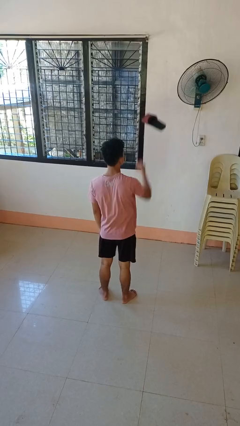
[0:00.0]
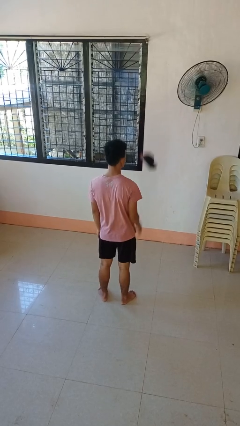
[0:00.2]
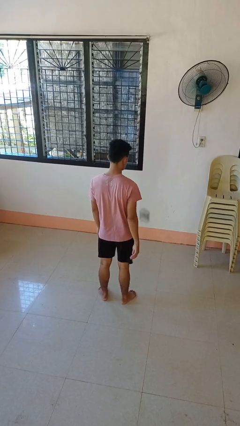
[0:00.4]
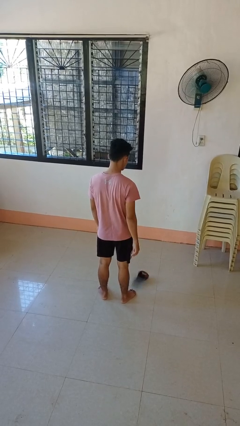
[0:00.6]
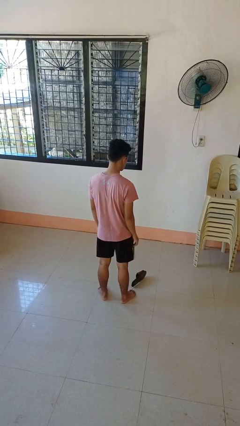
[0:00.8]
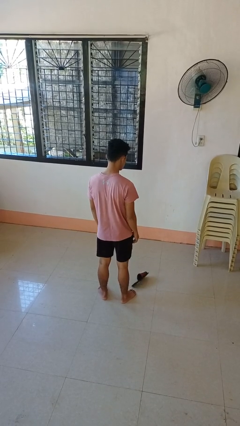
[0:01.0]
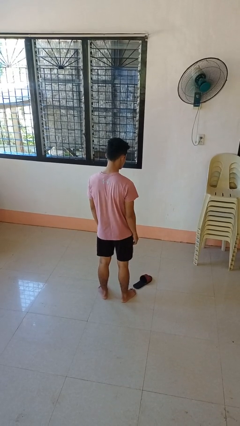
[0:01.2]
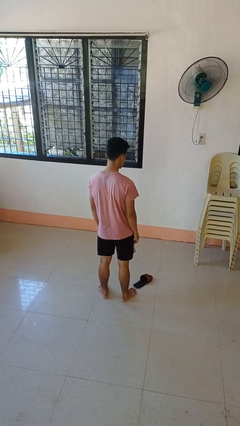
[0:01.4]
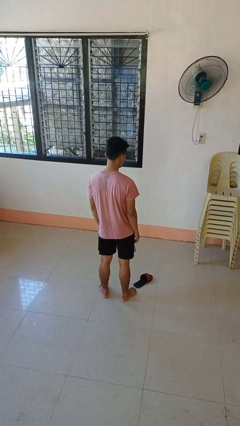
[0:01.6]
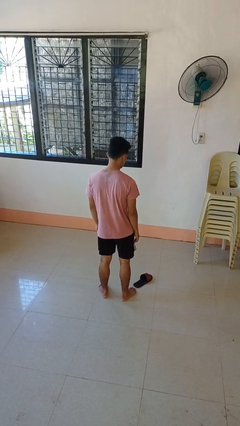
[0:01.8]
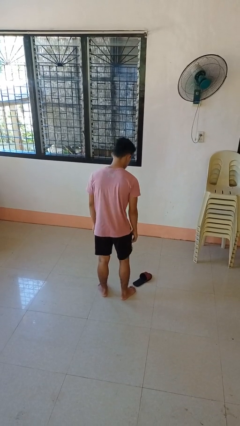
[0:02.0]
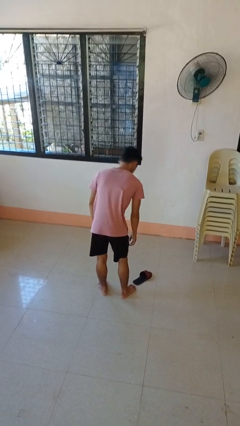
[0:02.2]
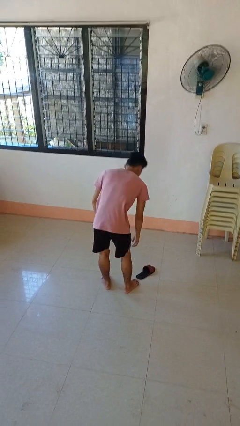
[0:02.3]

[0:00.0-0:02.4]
person throws object into air

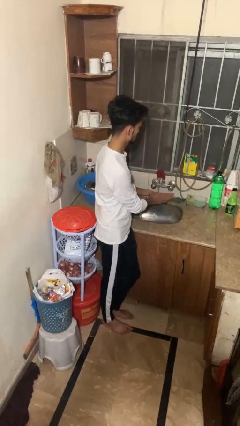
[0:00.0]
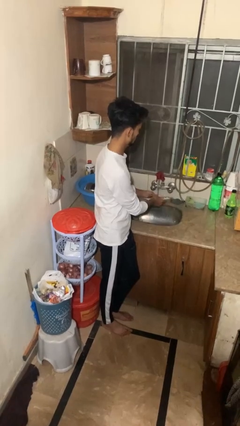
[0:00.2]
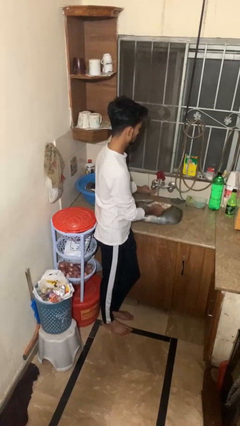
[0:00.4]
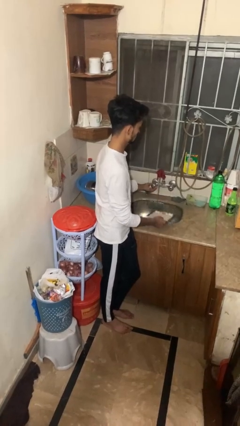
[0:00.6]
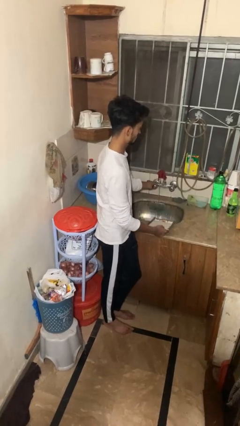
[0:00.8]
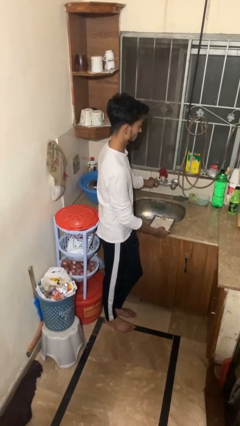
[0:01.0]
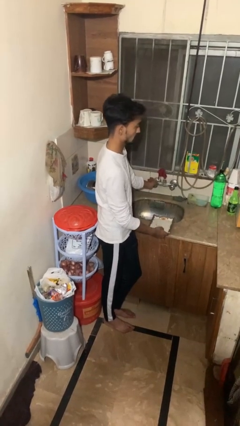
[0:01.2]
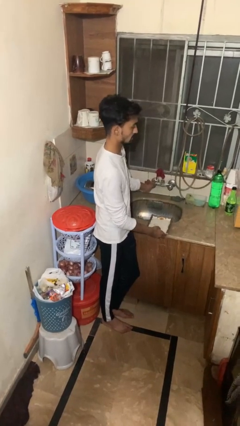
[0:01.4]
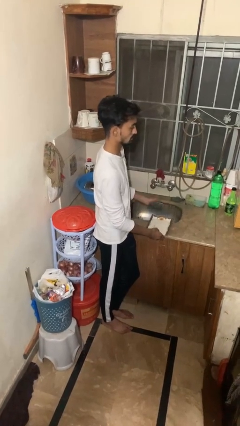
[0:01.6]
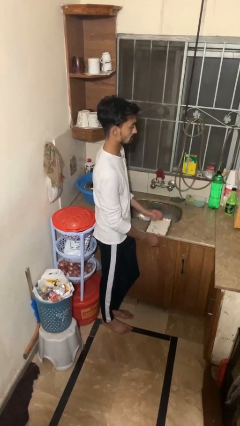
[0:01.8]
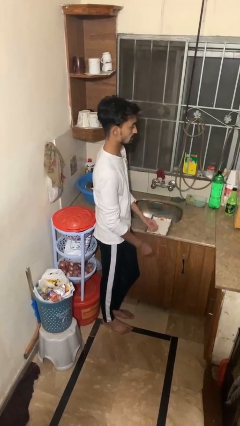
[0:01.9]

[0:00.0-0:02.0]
person closes dishwasher

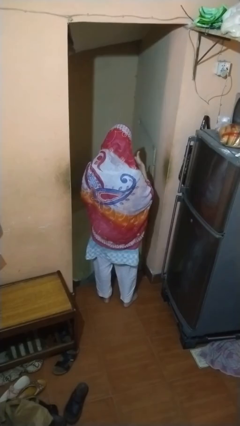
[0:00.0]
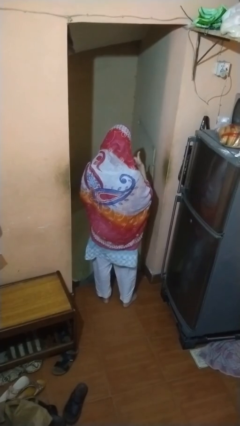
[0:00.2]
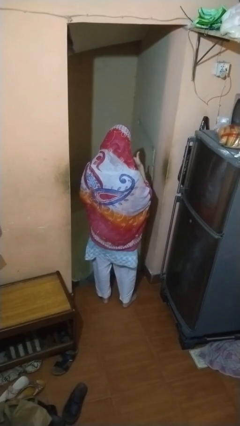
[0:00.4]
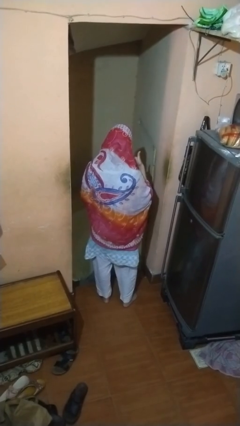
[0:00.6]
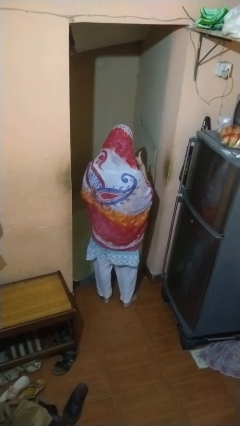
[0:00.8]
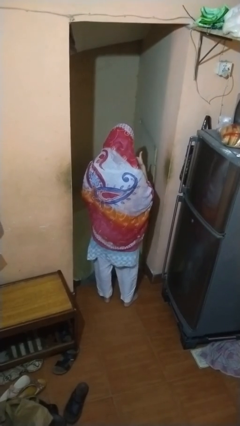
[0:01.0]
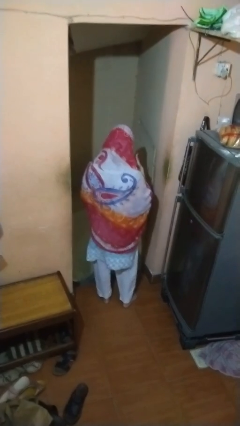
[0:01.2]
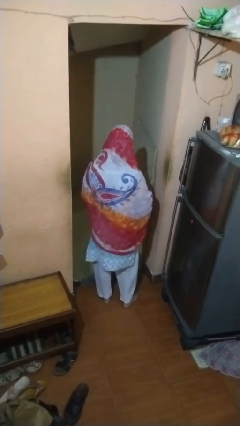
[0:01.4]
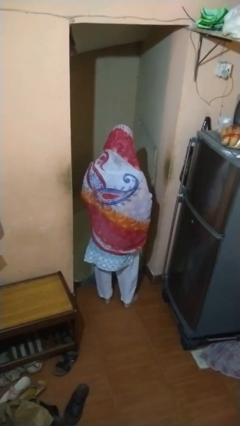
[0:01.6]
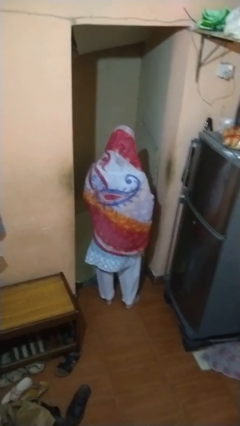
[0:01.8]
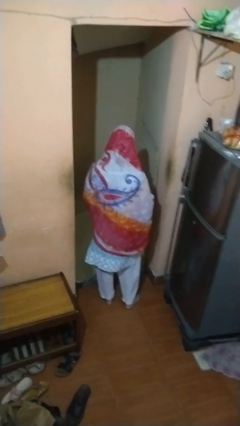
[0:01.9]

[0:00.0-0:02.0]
person gestures call me

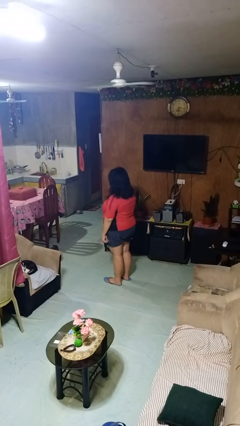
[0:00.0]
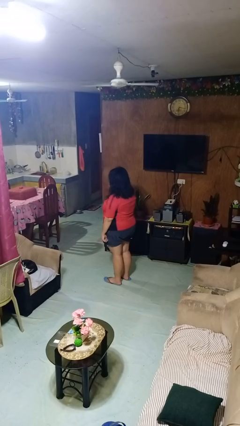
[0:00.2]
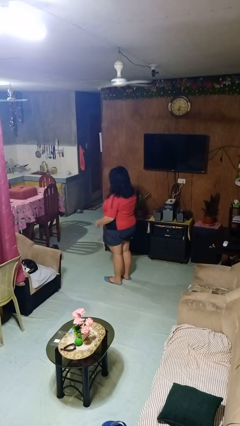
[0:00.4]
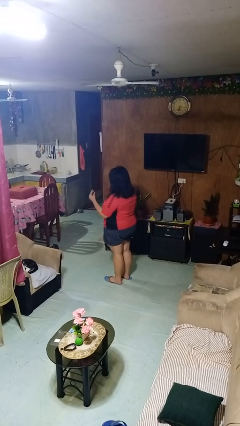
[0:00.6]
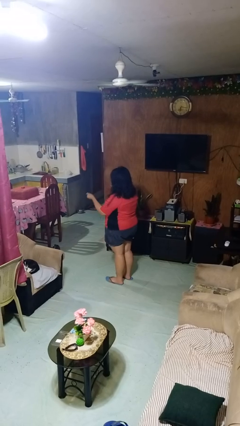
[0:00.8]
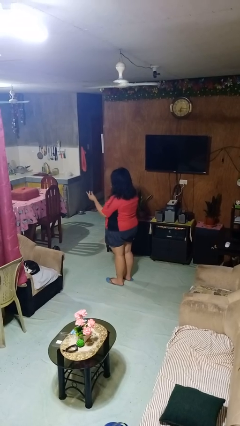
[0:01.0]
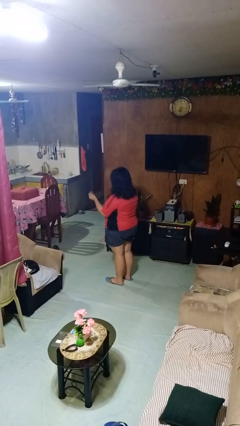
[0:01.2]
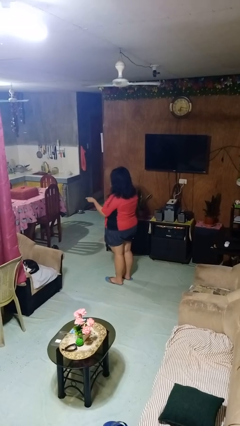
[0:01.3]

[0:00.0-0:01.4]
person snaps fingers

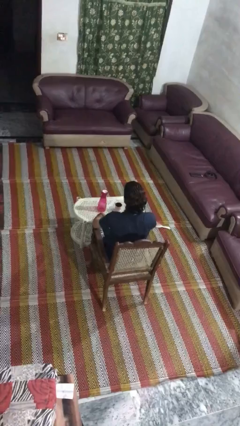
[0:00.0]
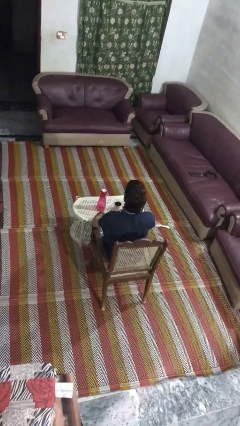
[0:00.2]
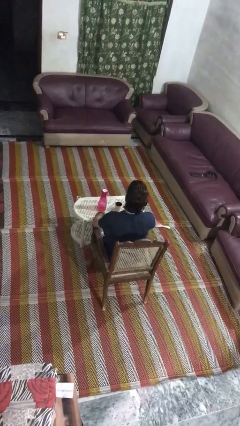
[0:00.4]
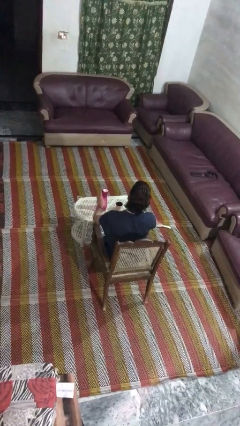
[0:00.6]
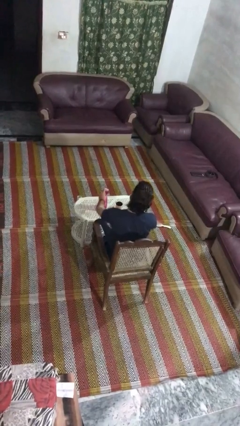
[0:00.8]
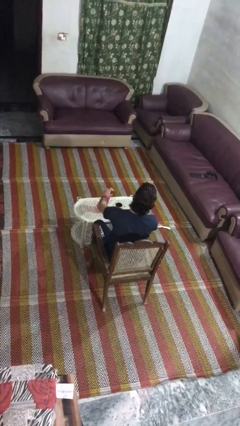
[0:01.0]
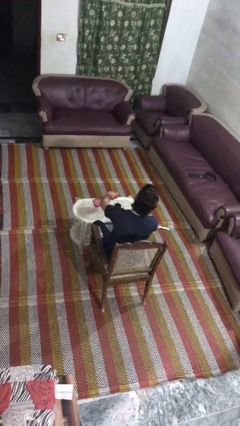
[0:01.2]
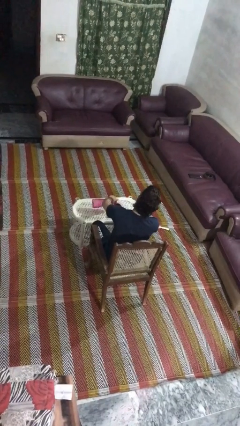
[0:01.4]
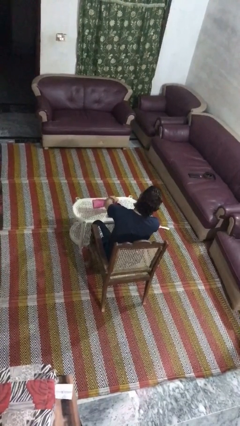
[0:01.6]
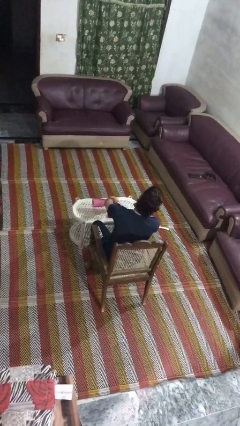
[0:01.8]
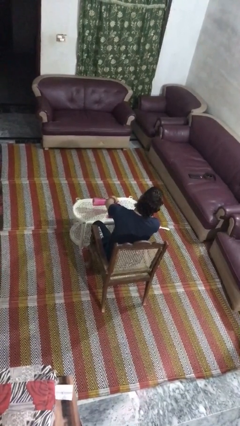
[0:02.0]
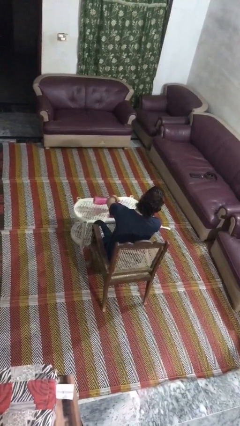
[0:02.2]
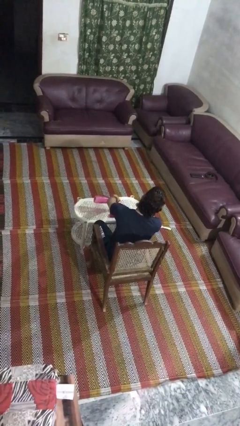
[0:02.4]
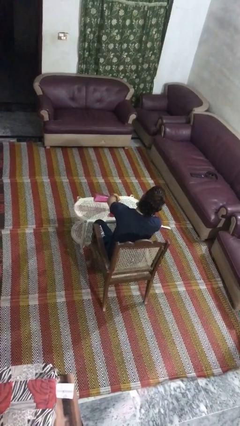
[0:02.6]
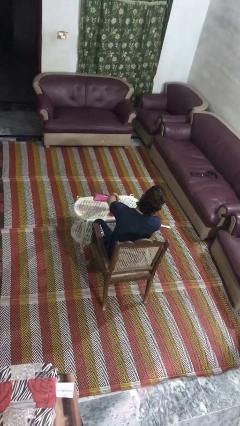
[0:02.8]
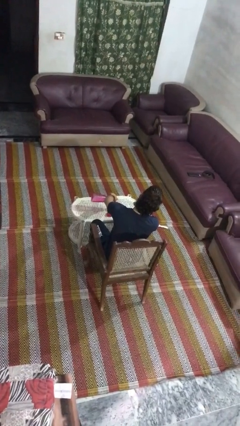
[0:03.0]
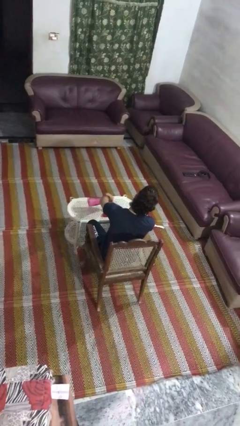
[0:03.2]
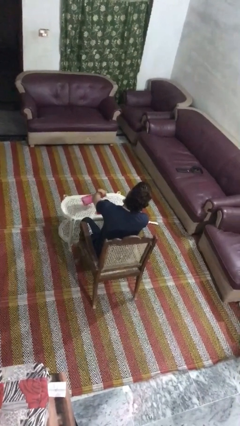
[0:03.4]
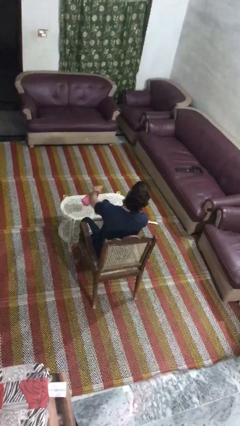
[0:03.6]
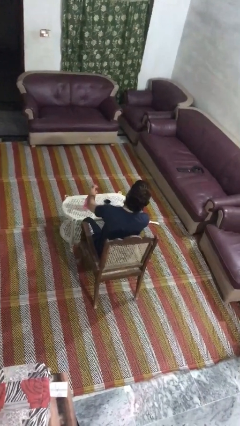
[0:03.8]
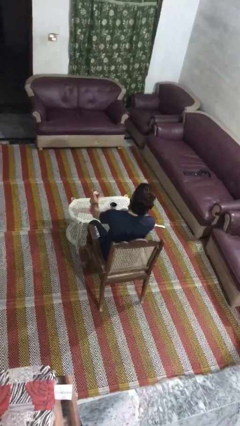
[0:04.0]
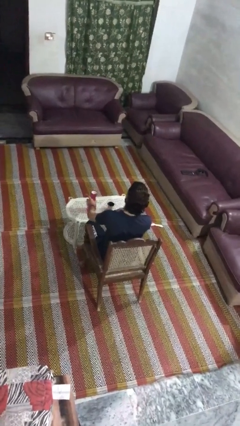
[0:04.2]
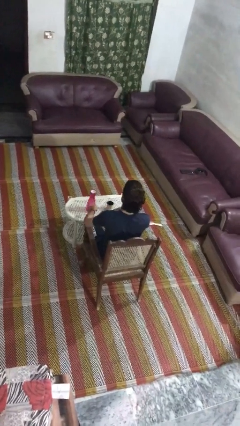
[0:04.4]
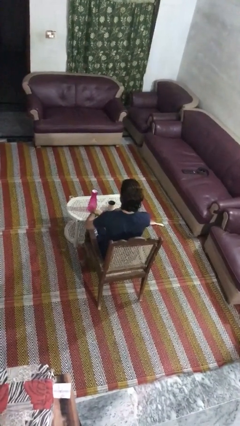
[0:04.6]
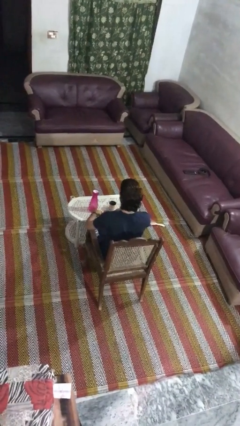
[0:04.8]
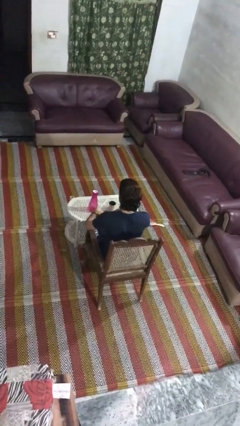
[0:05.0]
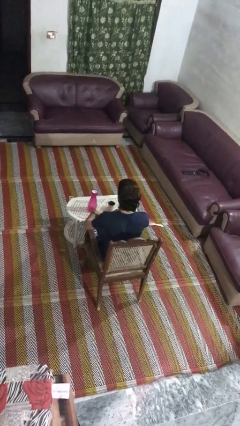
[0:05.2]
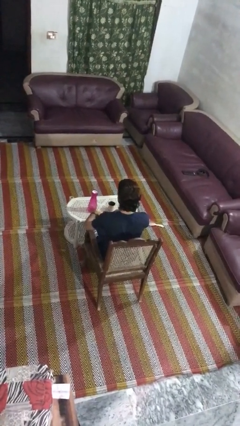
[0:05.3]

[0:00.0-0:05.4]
person pours liquid into cup

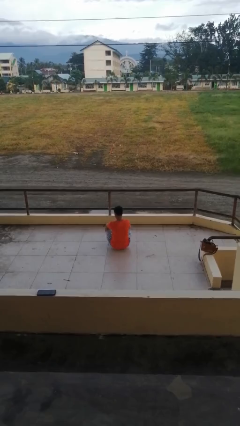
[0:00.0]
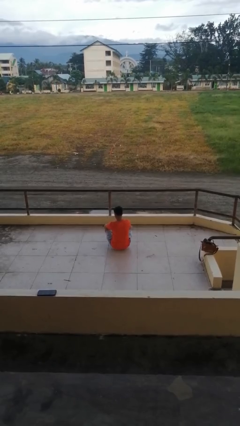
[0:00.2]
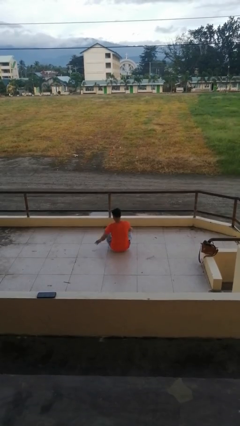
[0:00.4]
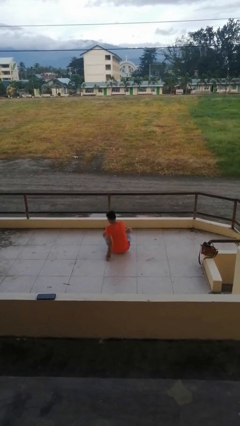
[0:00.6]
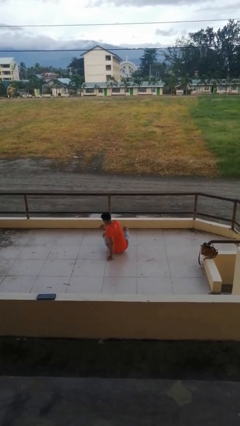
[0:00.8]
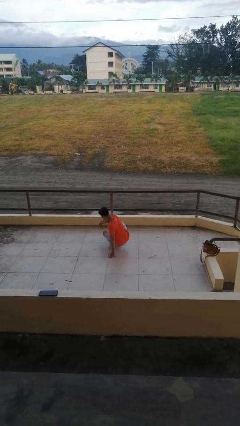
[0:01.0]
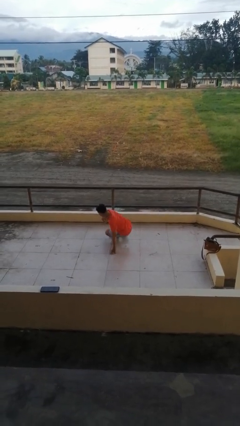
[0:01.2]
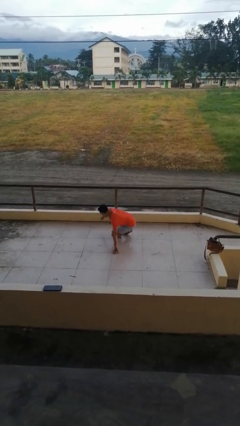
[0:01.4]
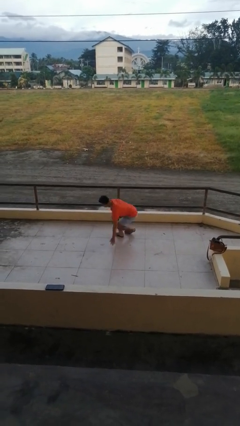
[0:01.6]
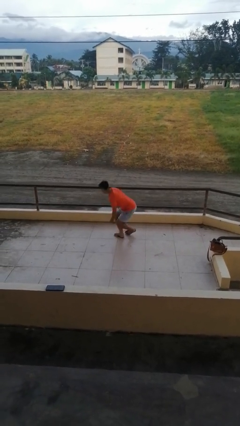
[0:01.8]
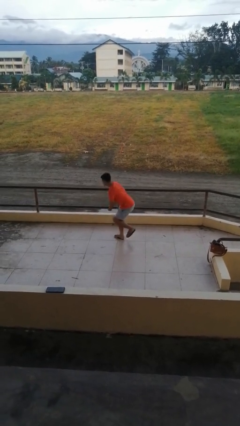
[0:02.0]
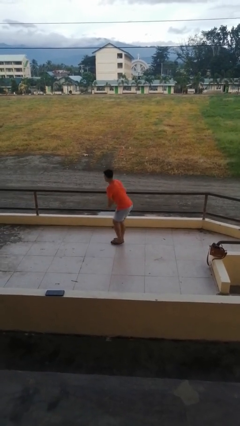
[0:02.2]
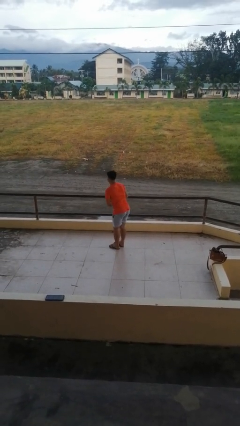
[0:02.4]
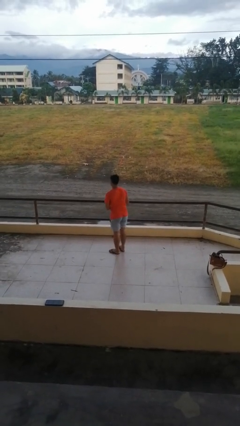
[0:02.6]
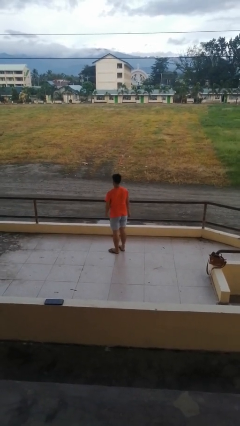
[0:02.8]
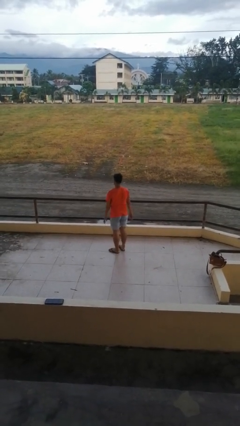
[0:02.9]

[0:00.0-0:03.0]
person stands up from floor

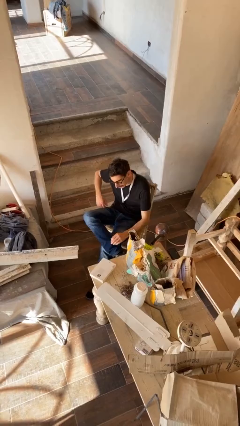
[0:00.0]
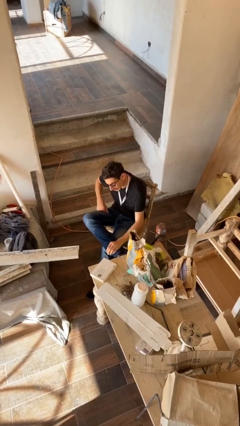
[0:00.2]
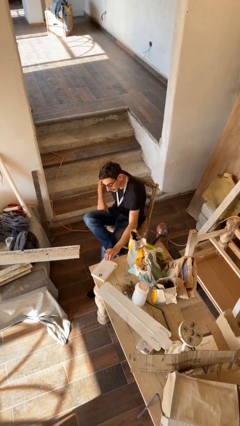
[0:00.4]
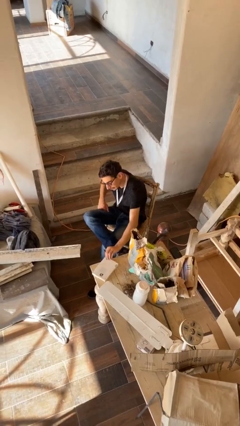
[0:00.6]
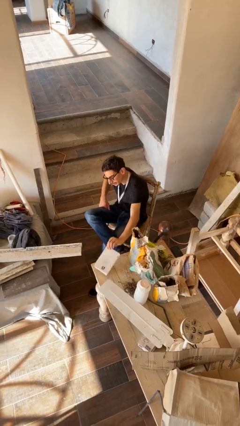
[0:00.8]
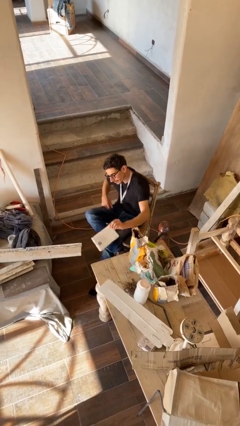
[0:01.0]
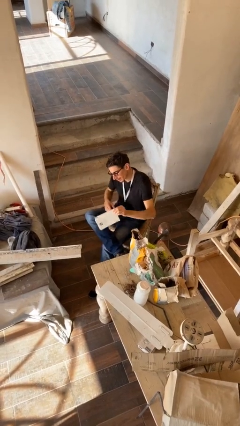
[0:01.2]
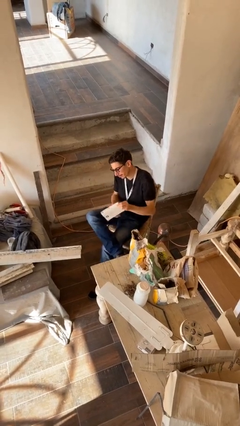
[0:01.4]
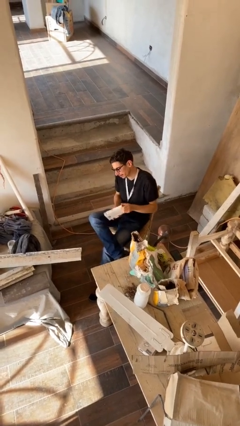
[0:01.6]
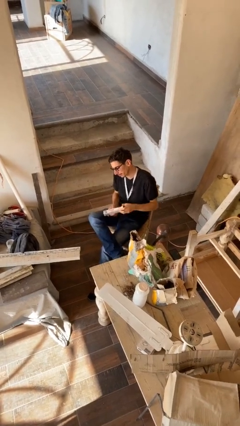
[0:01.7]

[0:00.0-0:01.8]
person picks up object from table
